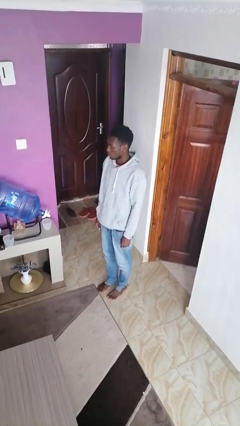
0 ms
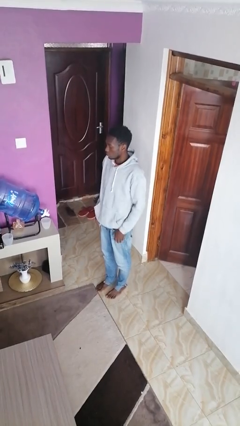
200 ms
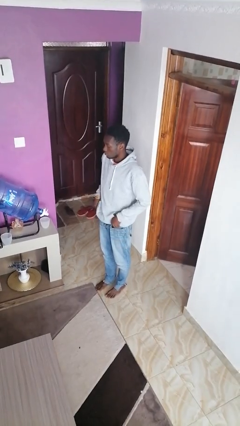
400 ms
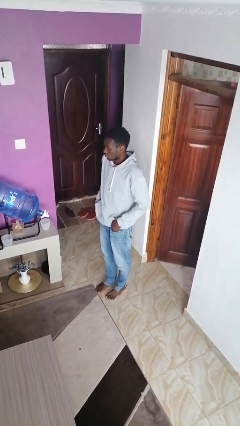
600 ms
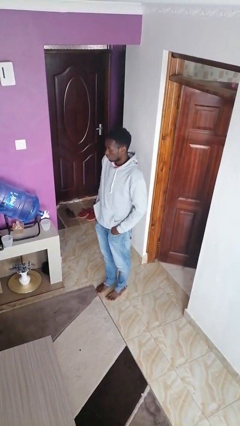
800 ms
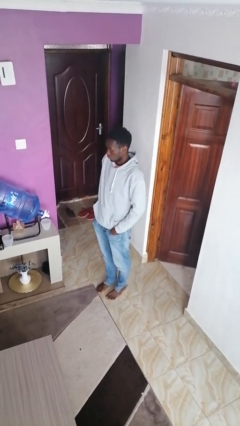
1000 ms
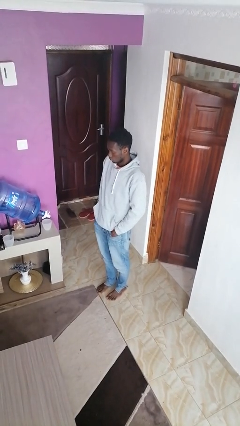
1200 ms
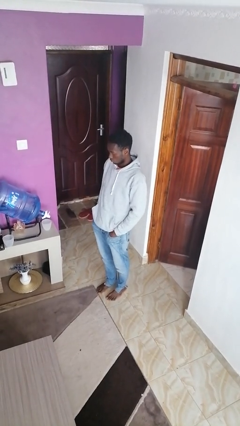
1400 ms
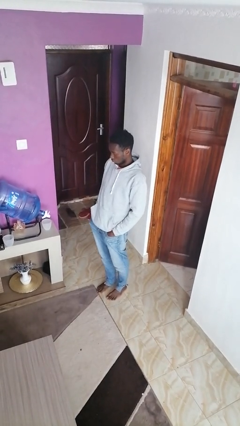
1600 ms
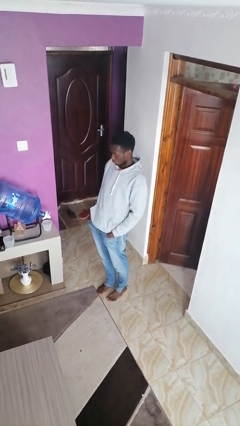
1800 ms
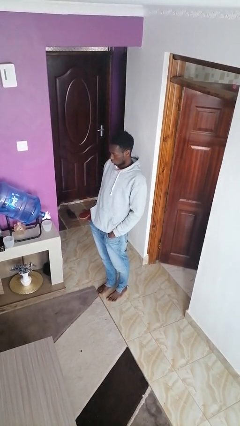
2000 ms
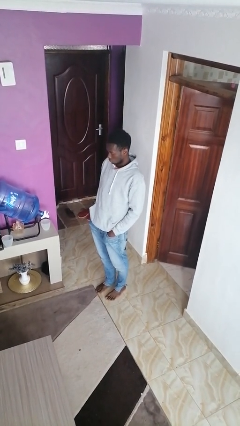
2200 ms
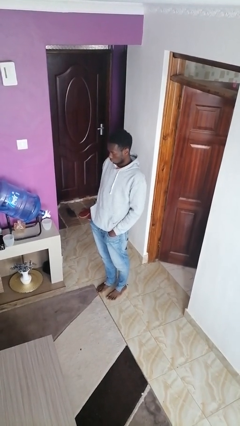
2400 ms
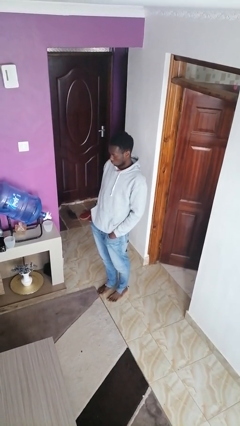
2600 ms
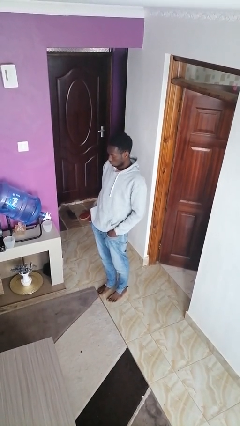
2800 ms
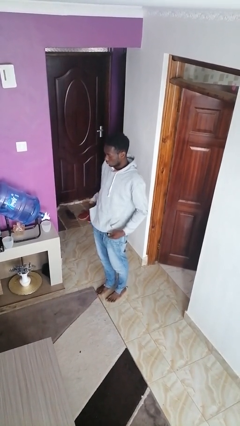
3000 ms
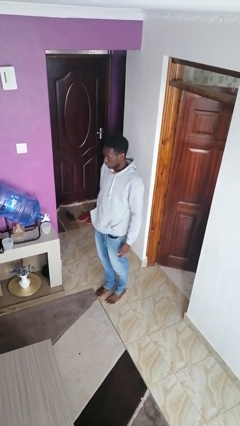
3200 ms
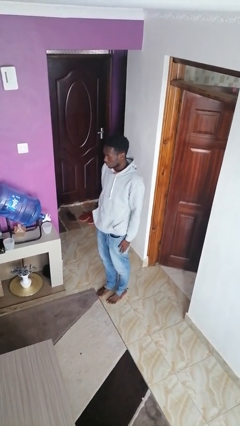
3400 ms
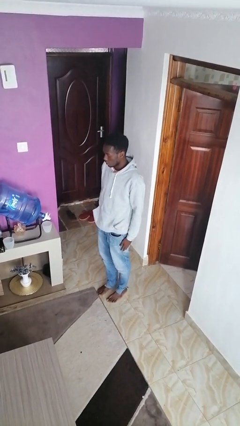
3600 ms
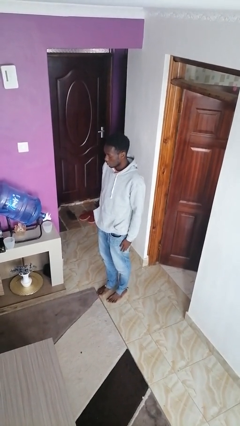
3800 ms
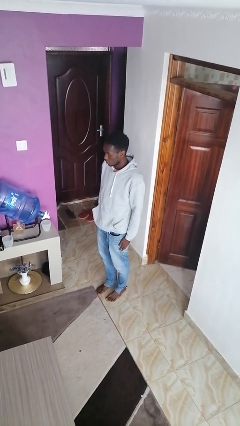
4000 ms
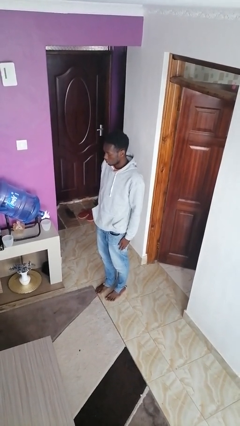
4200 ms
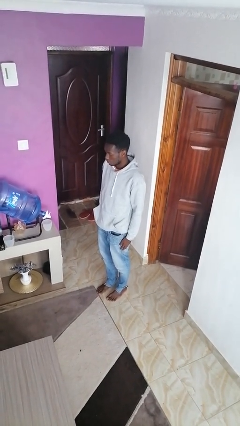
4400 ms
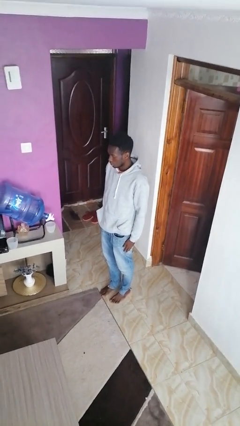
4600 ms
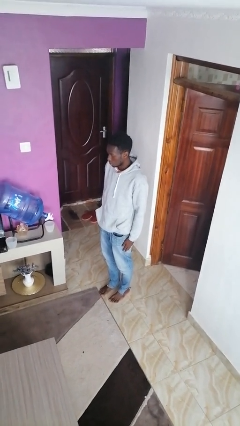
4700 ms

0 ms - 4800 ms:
person puts hands in back pockets

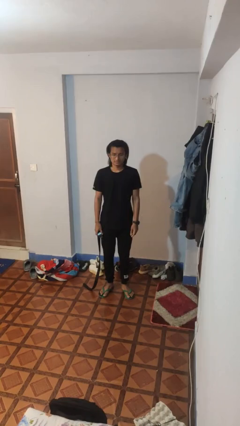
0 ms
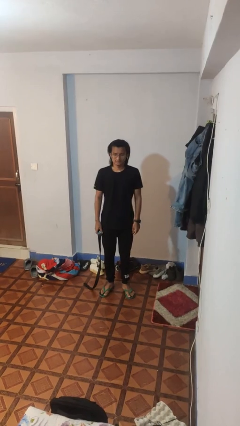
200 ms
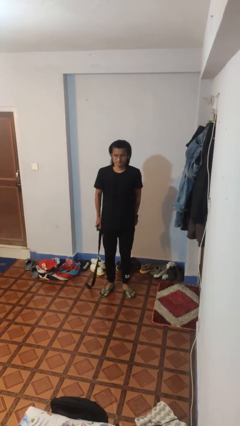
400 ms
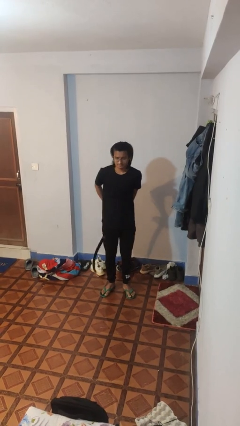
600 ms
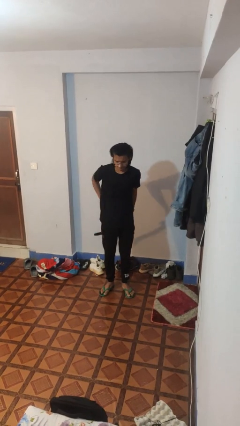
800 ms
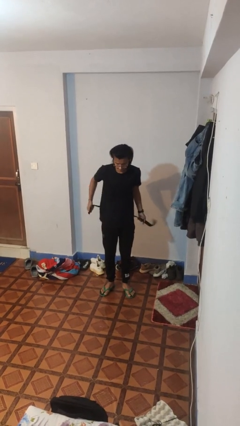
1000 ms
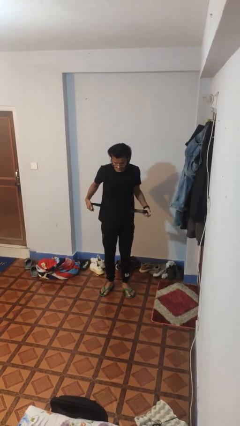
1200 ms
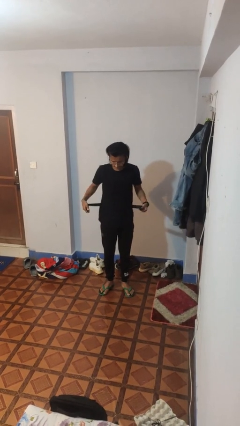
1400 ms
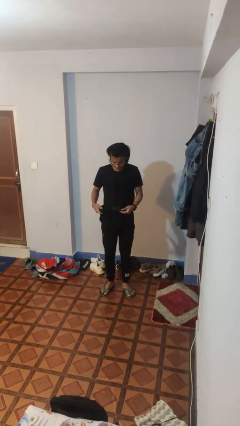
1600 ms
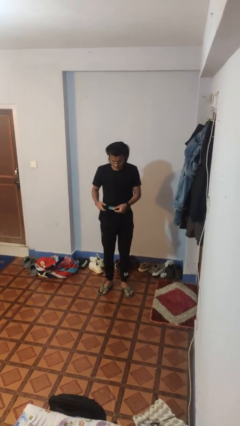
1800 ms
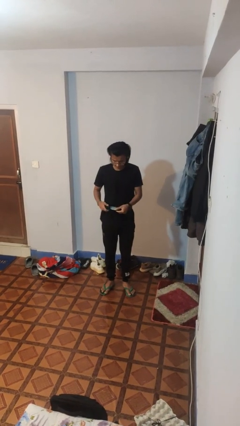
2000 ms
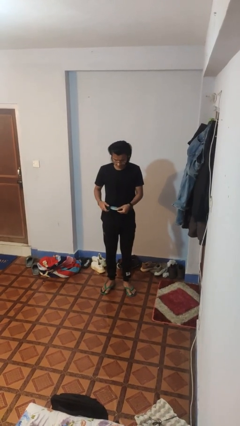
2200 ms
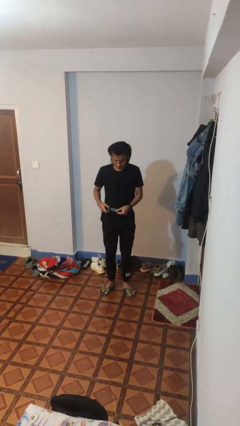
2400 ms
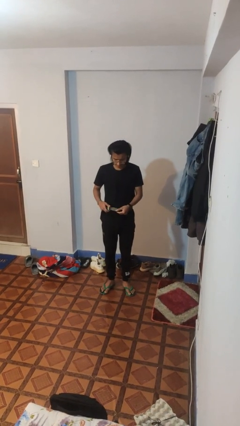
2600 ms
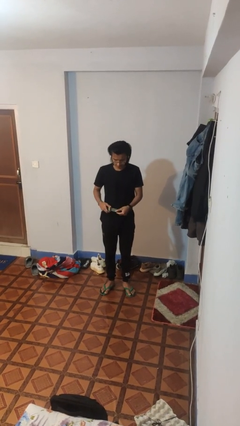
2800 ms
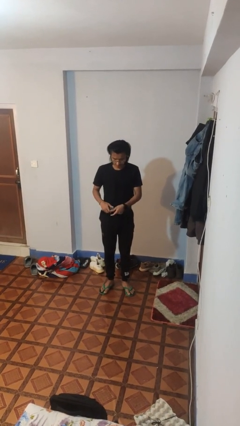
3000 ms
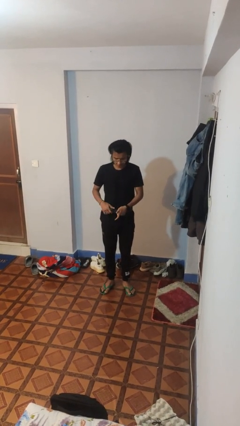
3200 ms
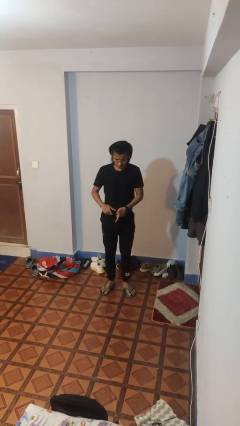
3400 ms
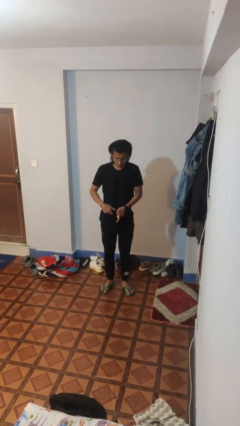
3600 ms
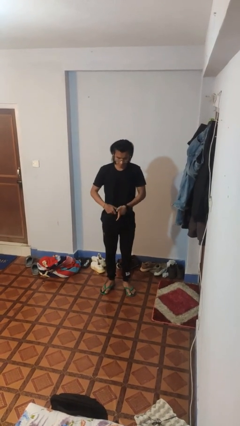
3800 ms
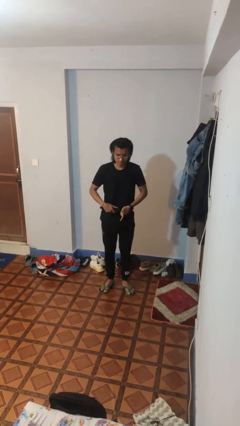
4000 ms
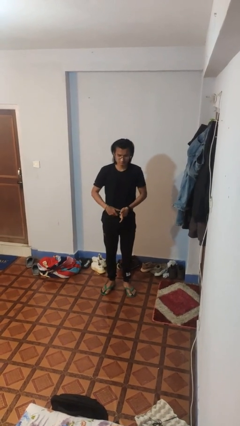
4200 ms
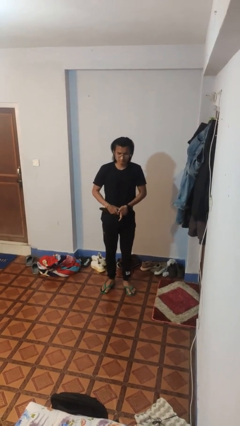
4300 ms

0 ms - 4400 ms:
person puts on belt

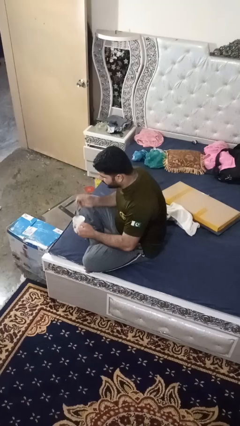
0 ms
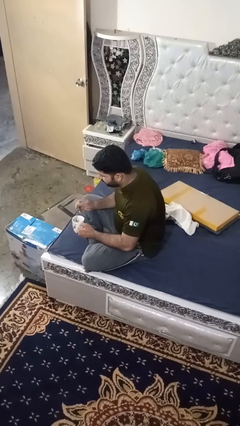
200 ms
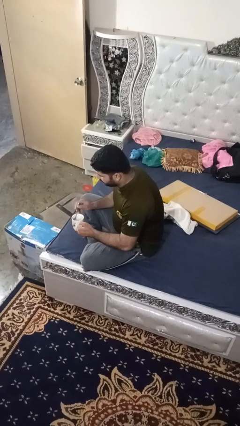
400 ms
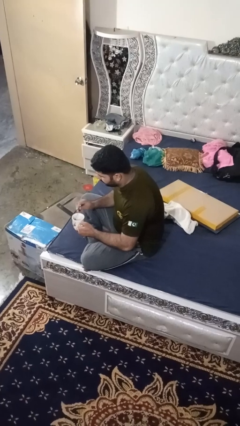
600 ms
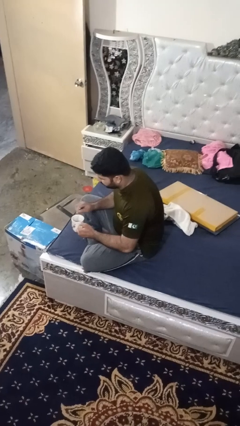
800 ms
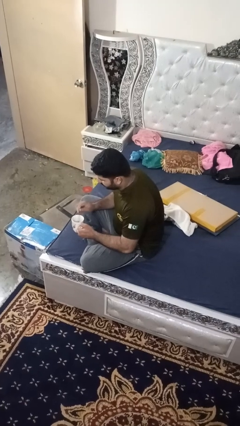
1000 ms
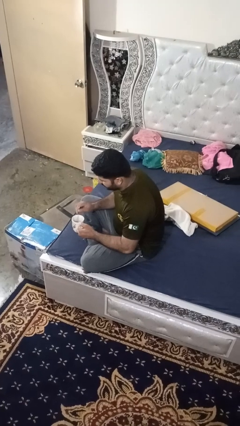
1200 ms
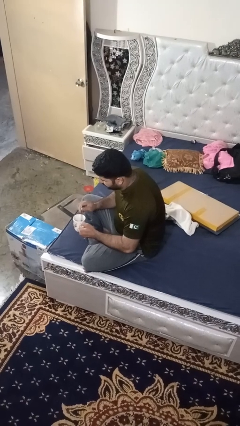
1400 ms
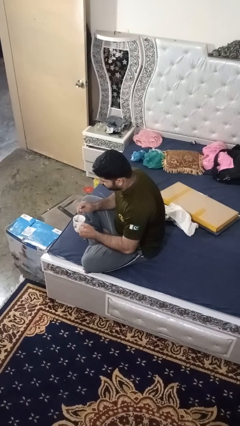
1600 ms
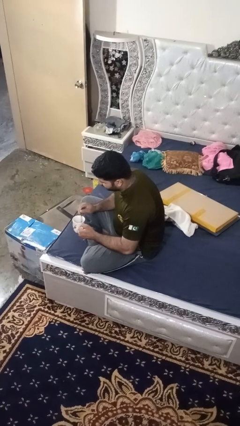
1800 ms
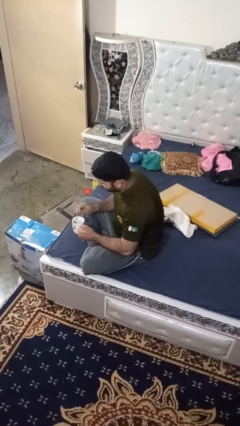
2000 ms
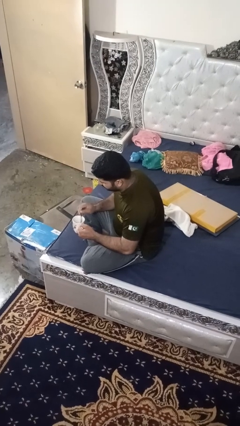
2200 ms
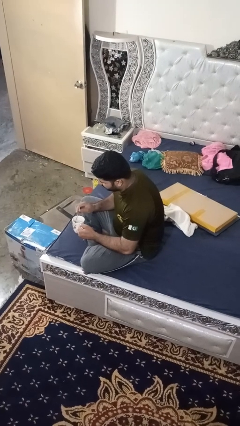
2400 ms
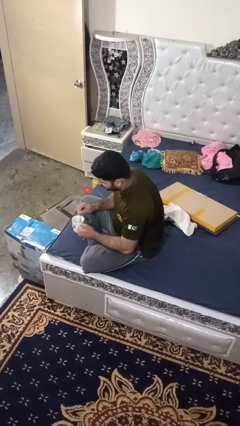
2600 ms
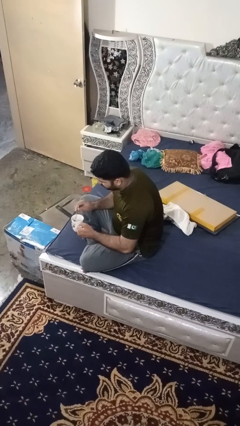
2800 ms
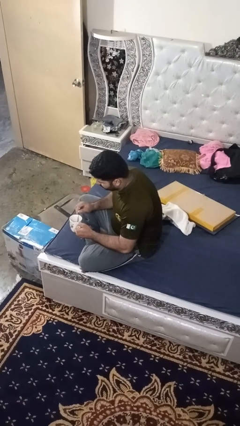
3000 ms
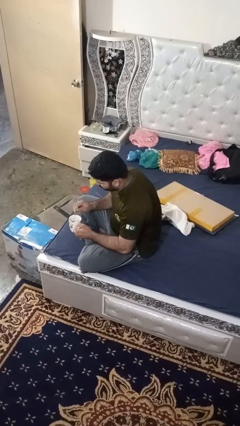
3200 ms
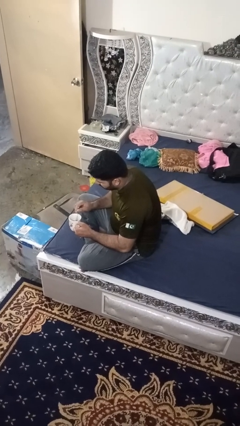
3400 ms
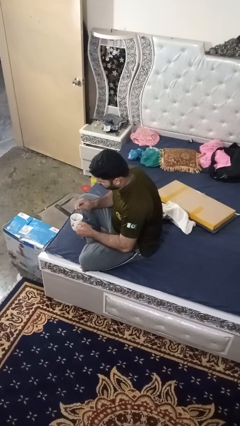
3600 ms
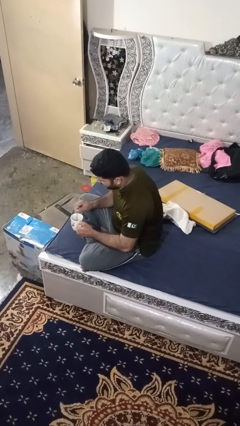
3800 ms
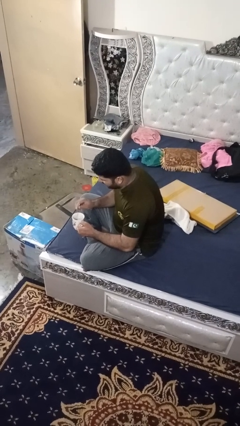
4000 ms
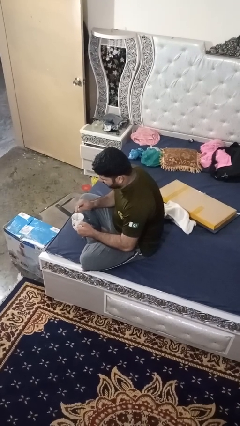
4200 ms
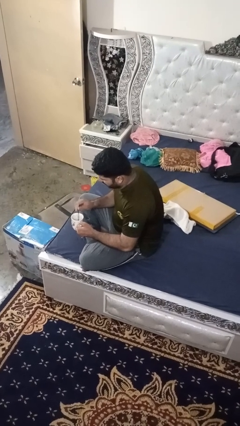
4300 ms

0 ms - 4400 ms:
person stirs mug

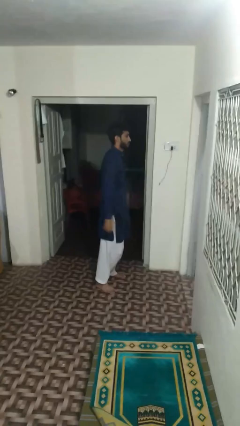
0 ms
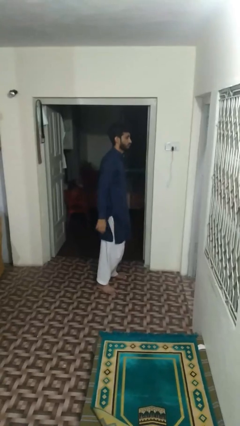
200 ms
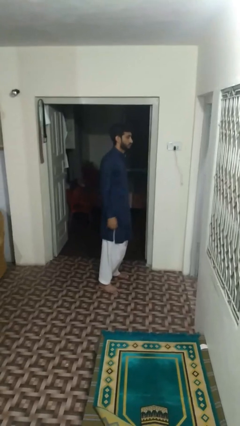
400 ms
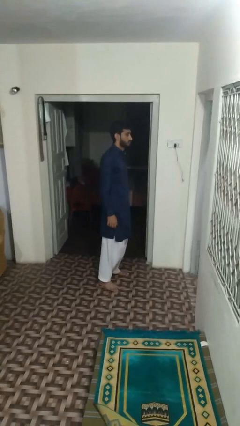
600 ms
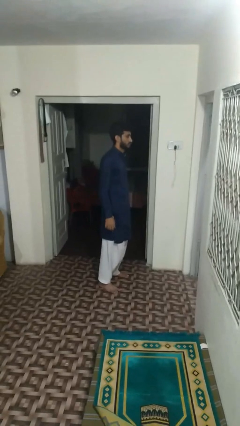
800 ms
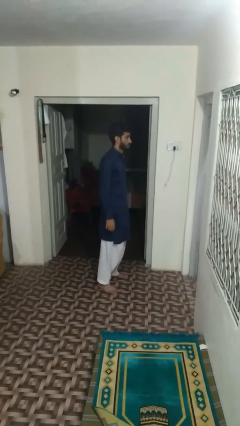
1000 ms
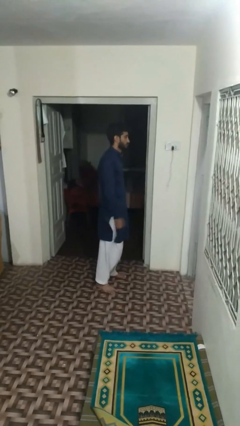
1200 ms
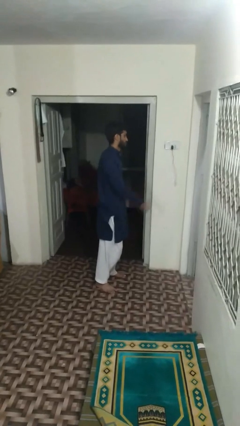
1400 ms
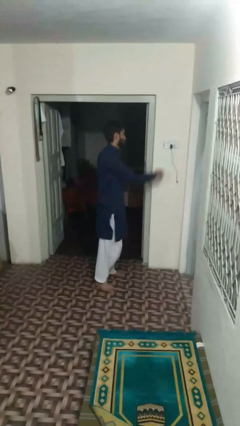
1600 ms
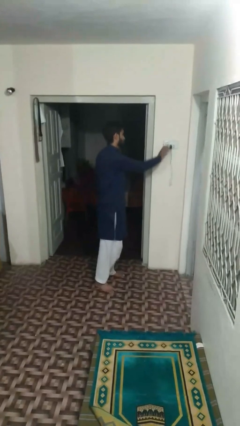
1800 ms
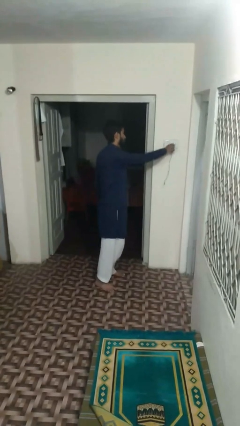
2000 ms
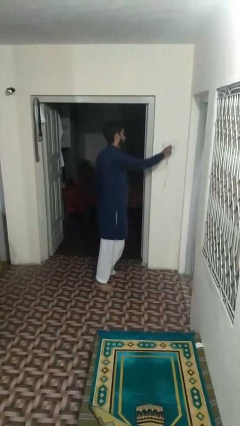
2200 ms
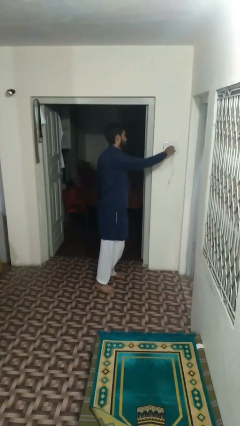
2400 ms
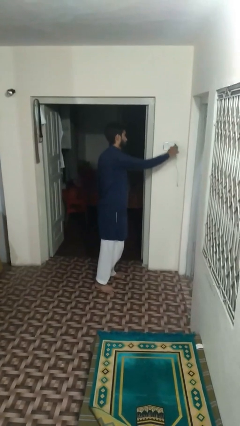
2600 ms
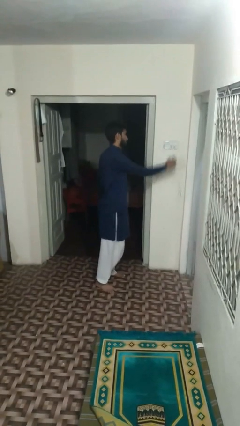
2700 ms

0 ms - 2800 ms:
person unplugs from electrical socket

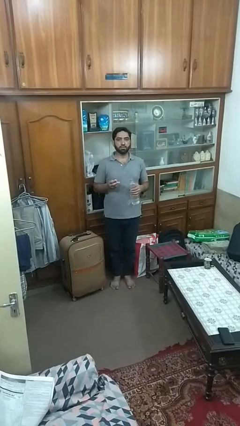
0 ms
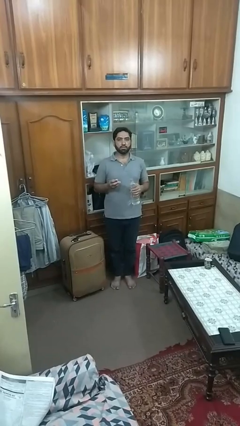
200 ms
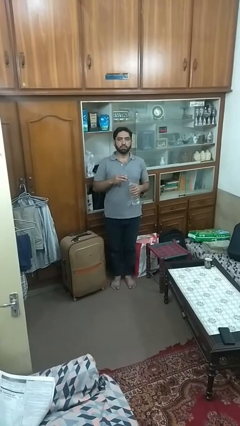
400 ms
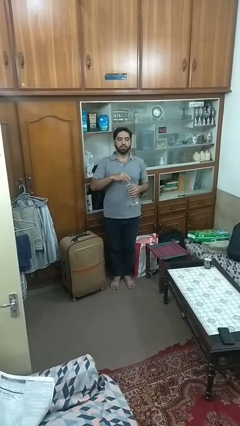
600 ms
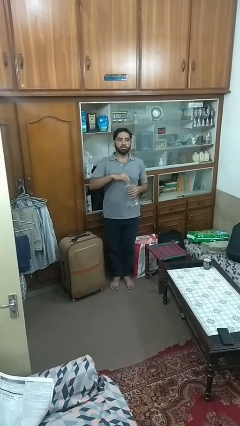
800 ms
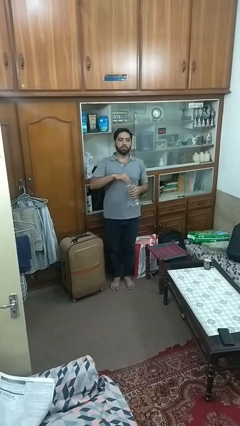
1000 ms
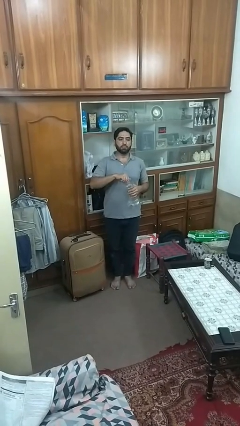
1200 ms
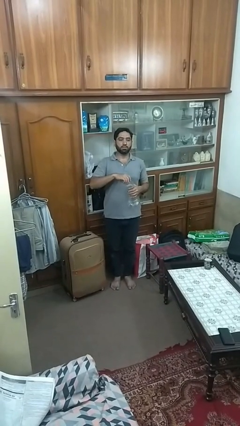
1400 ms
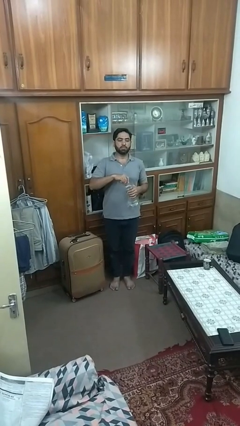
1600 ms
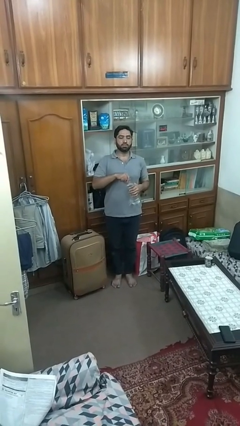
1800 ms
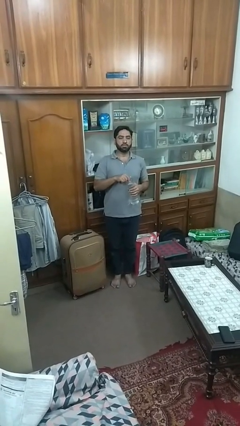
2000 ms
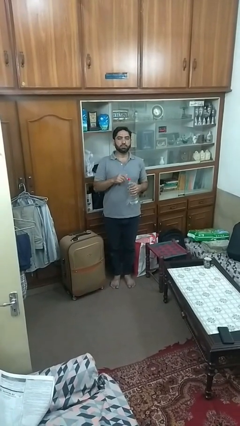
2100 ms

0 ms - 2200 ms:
person screws lid to bottle
